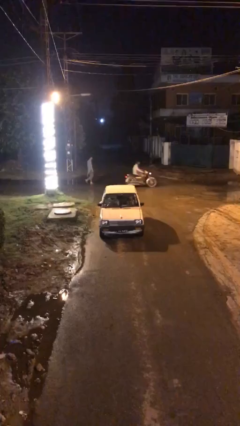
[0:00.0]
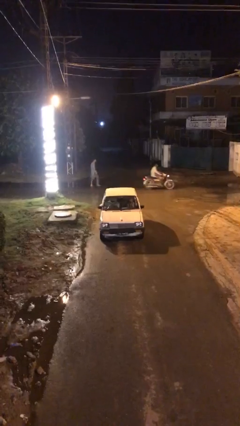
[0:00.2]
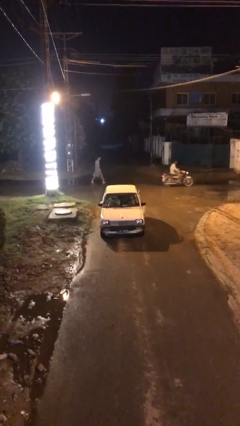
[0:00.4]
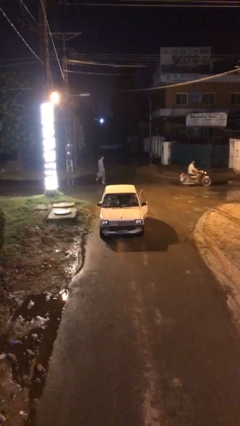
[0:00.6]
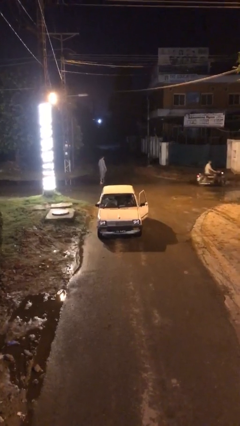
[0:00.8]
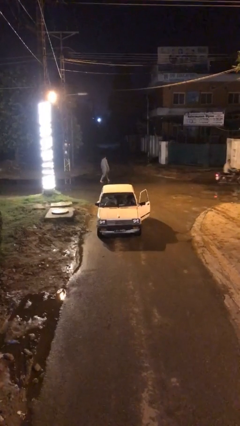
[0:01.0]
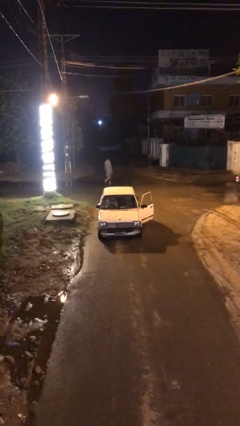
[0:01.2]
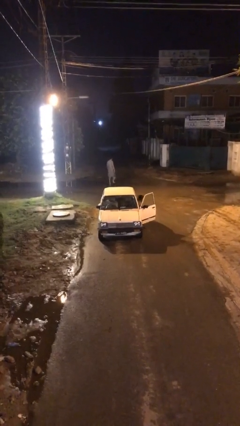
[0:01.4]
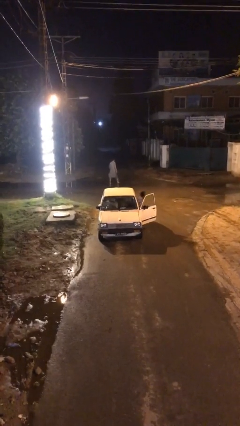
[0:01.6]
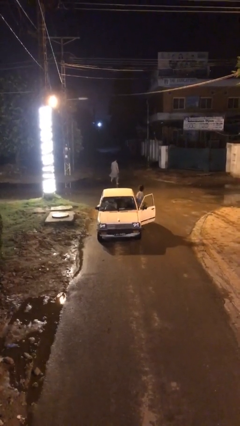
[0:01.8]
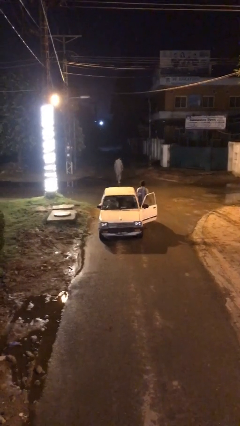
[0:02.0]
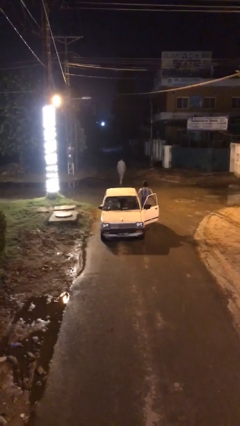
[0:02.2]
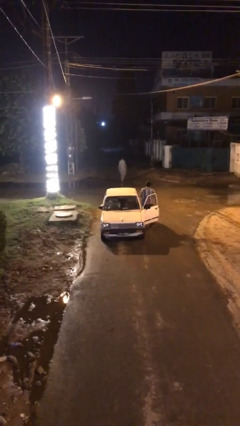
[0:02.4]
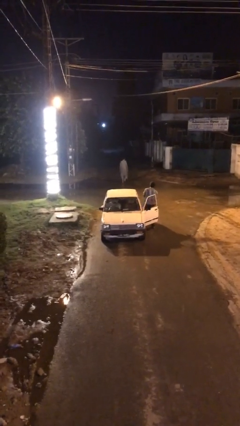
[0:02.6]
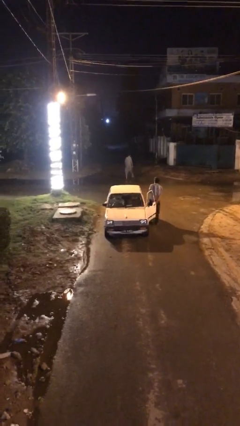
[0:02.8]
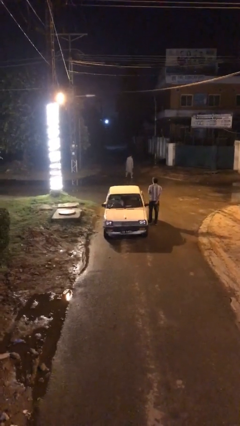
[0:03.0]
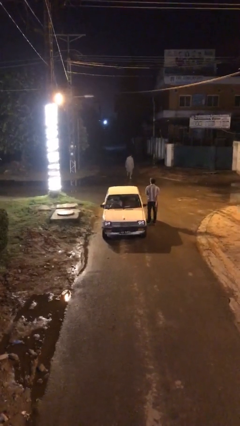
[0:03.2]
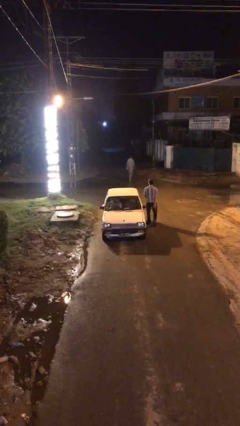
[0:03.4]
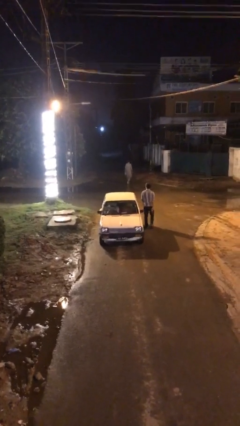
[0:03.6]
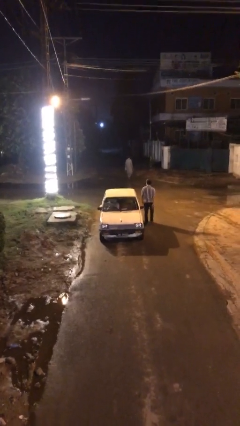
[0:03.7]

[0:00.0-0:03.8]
car drops off person

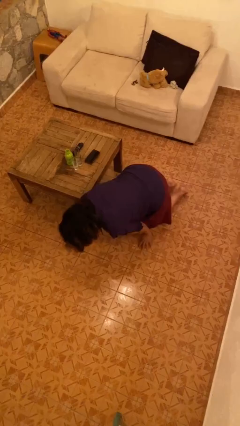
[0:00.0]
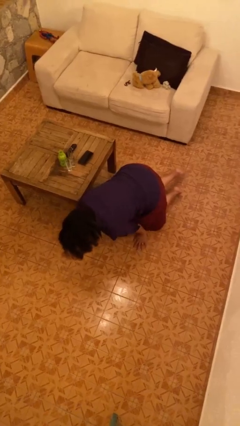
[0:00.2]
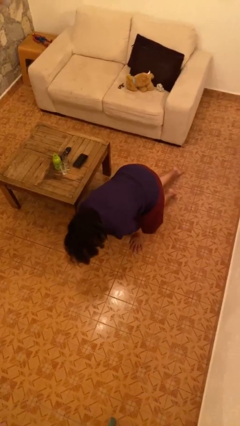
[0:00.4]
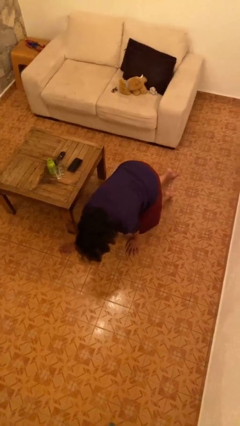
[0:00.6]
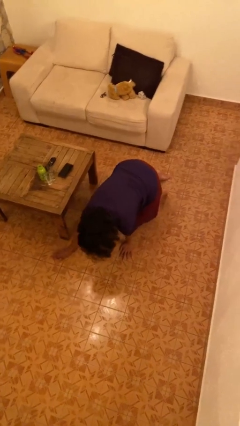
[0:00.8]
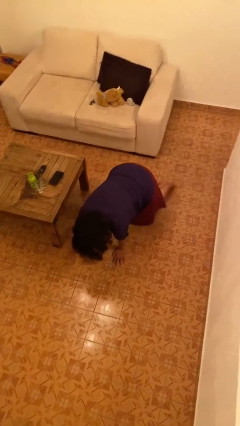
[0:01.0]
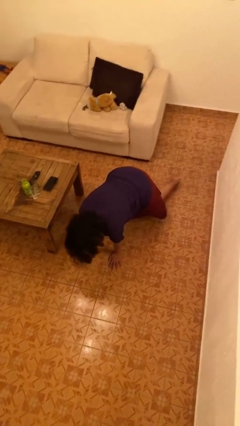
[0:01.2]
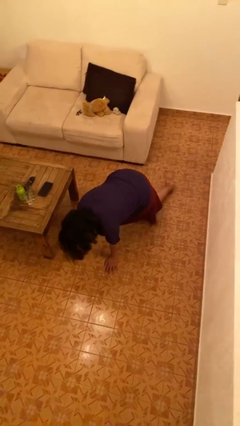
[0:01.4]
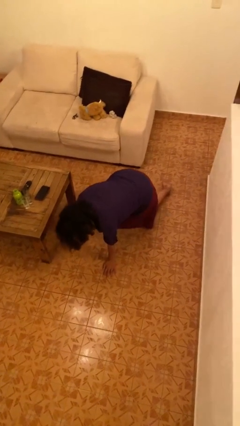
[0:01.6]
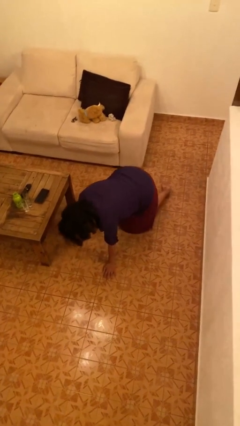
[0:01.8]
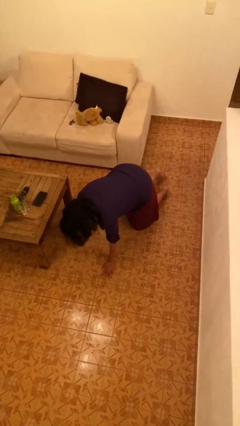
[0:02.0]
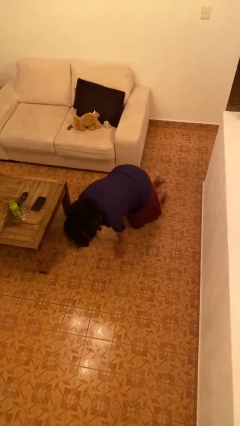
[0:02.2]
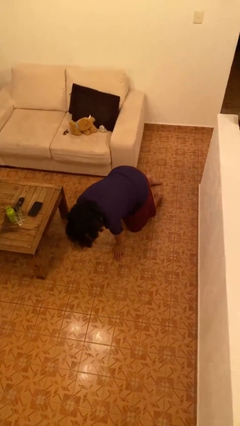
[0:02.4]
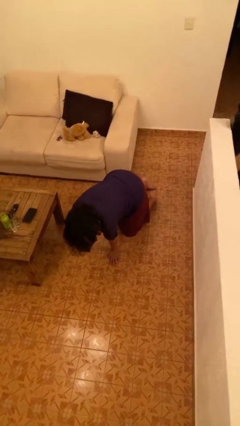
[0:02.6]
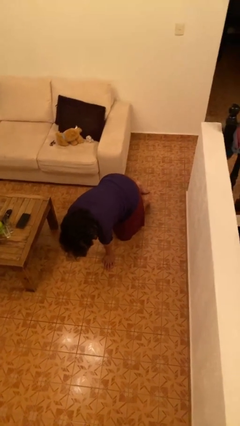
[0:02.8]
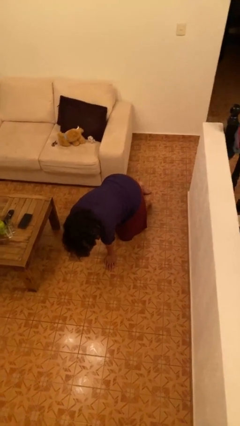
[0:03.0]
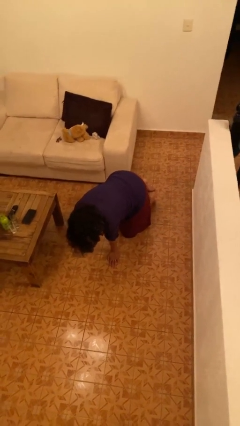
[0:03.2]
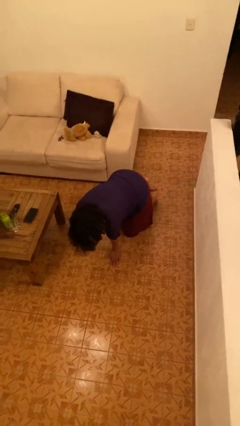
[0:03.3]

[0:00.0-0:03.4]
person crawls

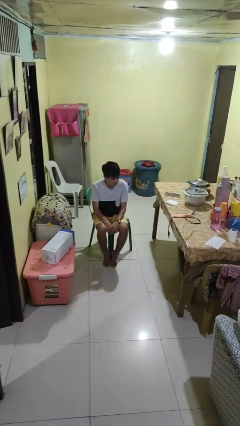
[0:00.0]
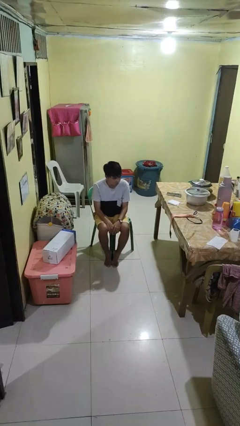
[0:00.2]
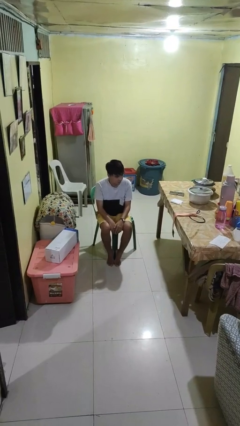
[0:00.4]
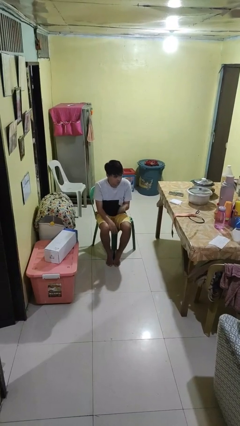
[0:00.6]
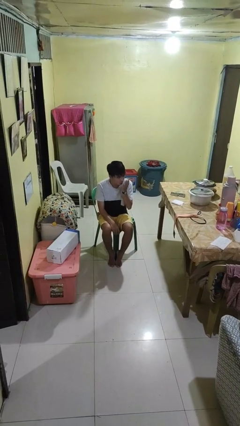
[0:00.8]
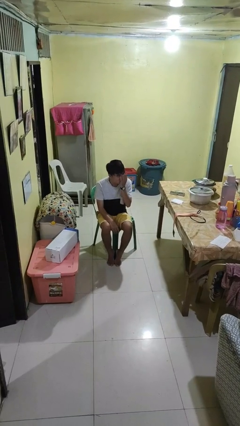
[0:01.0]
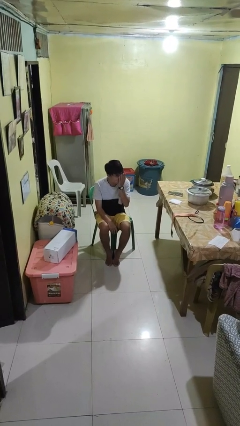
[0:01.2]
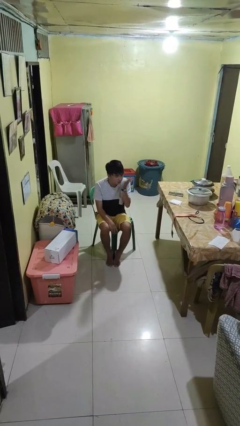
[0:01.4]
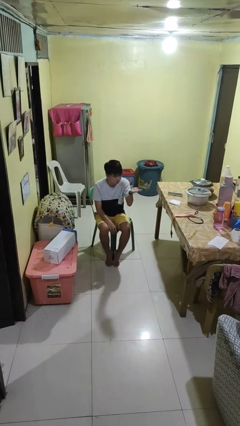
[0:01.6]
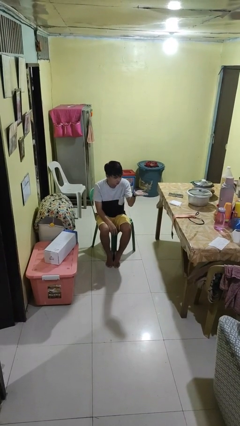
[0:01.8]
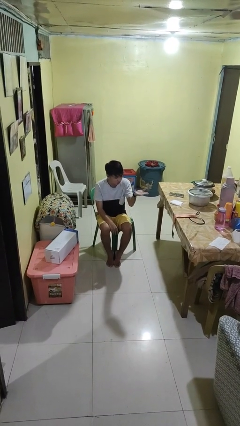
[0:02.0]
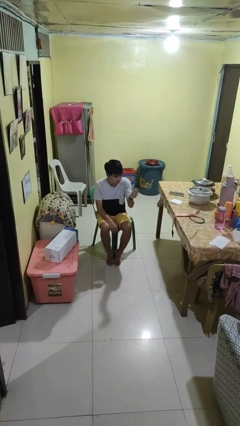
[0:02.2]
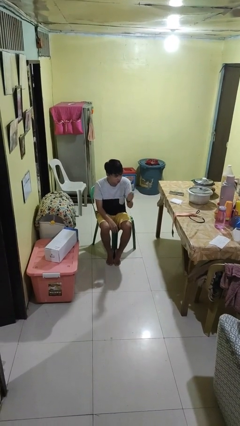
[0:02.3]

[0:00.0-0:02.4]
person gestures blow kiss

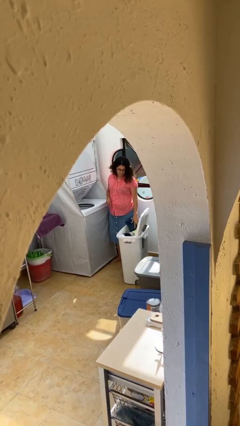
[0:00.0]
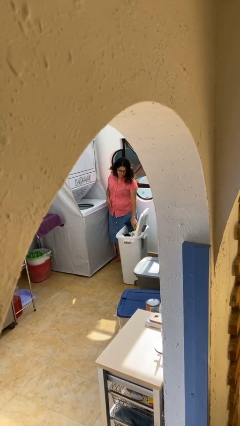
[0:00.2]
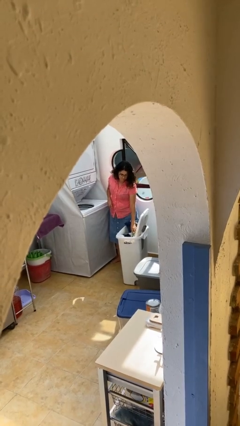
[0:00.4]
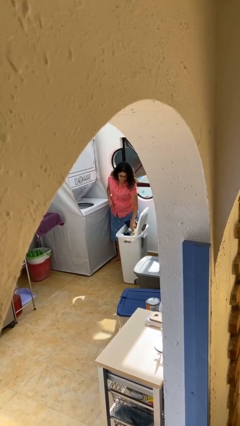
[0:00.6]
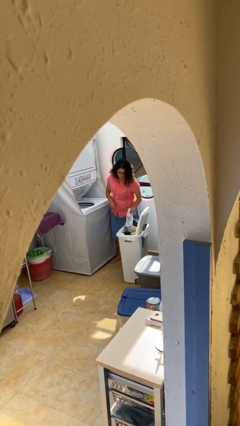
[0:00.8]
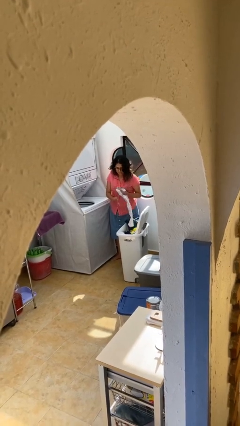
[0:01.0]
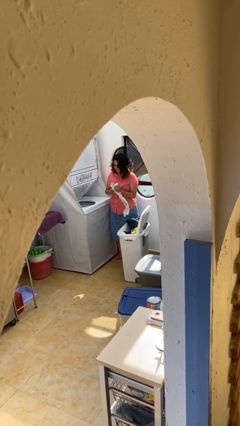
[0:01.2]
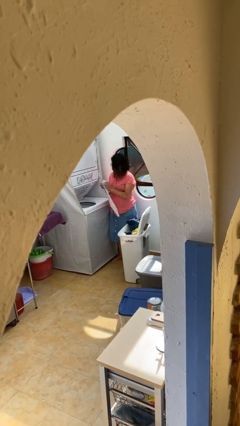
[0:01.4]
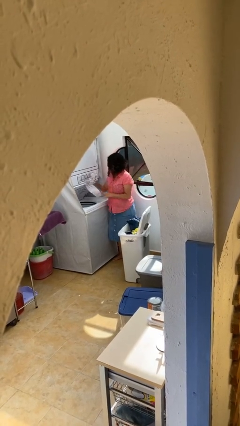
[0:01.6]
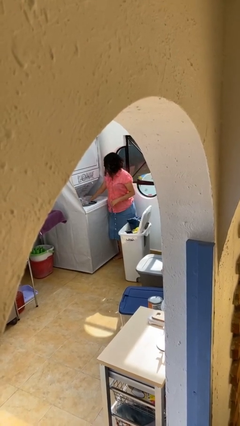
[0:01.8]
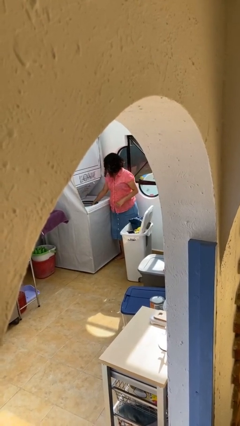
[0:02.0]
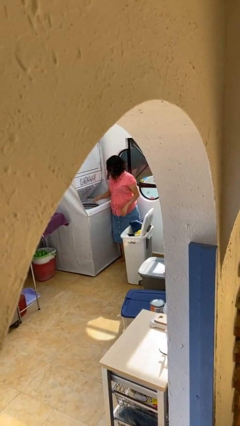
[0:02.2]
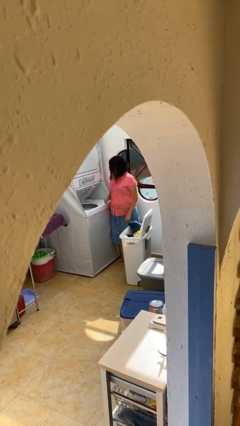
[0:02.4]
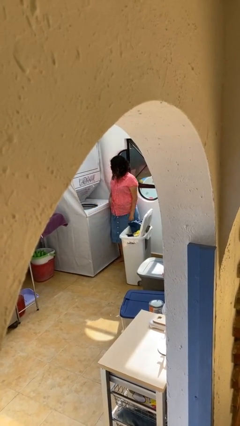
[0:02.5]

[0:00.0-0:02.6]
person loads clotheswasher

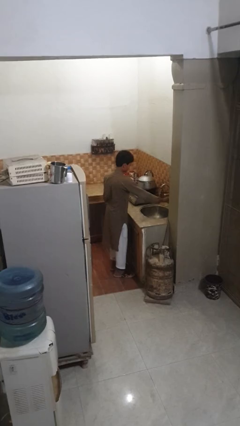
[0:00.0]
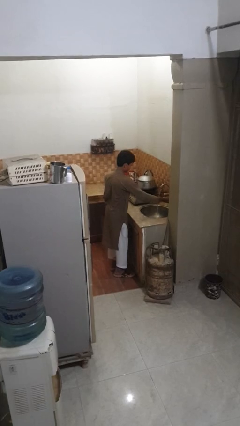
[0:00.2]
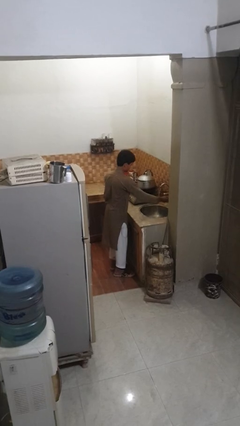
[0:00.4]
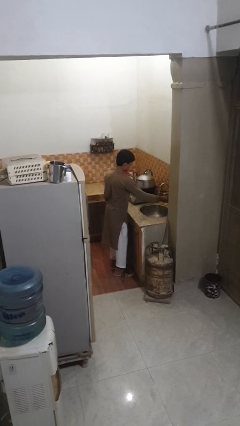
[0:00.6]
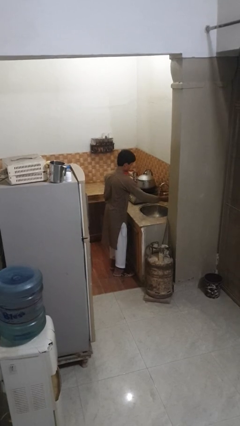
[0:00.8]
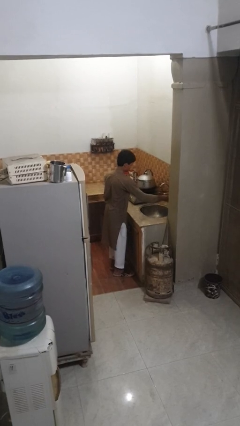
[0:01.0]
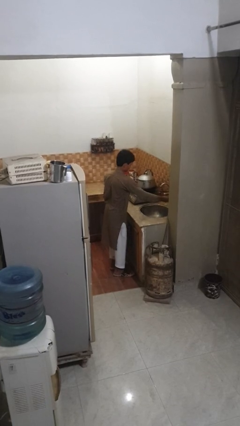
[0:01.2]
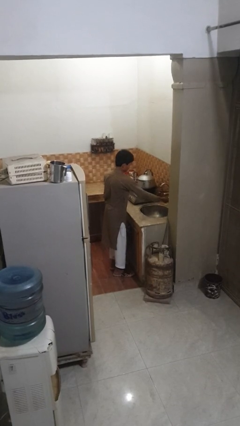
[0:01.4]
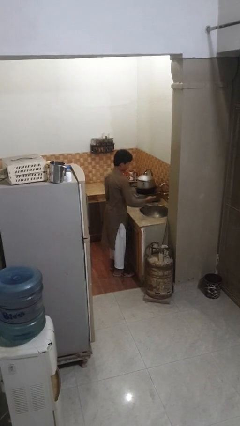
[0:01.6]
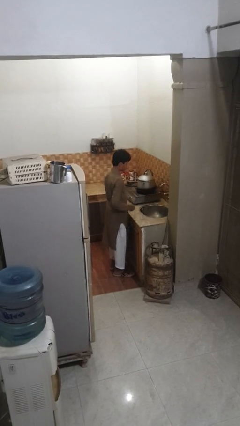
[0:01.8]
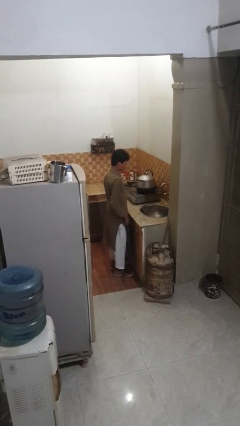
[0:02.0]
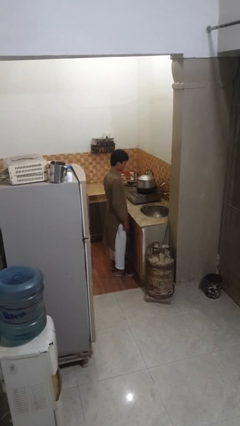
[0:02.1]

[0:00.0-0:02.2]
person turns off faucet

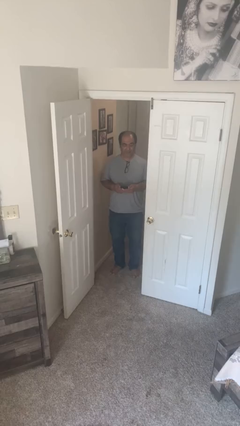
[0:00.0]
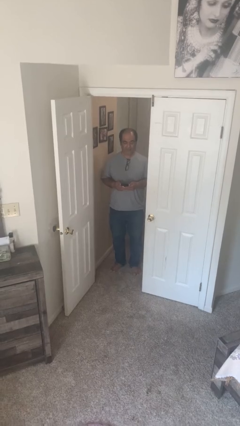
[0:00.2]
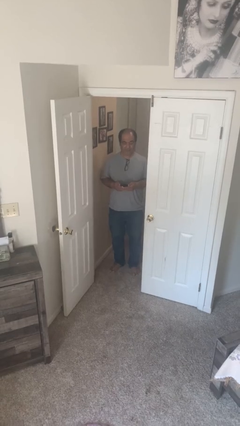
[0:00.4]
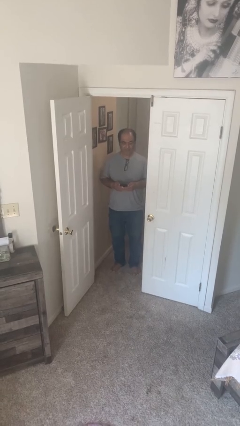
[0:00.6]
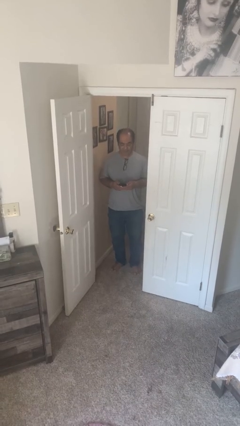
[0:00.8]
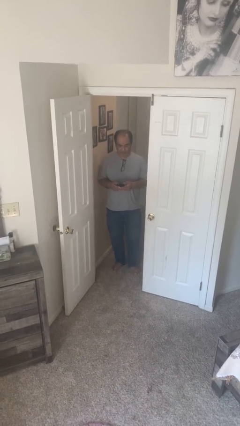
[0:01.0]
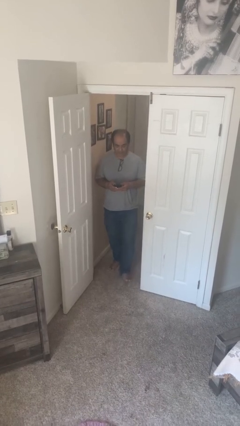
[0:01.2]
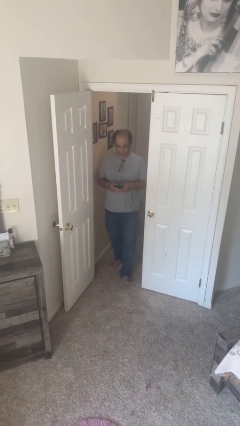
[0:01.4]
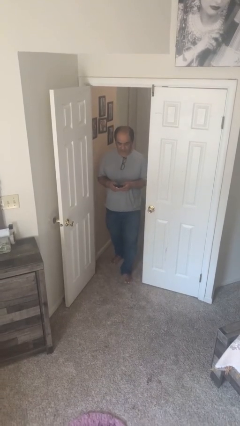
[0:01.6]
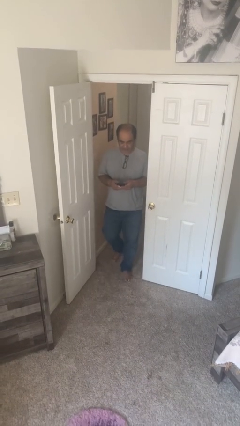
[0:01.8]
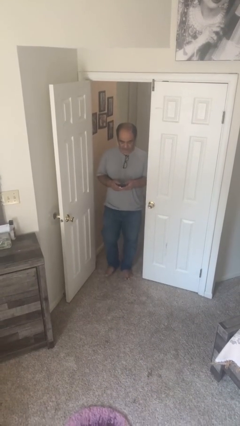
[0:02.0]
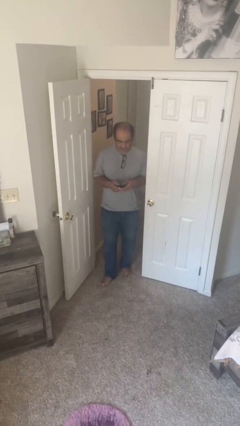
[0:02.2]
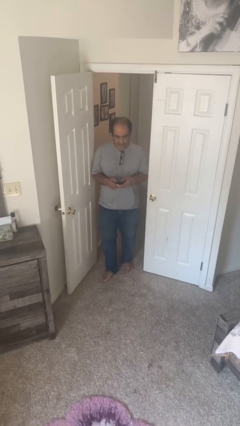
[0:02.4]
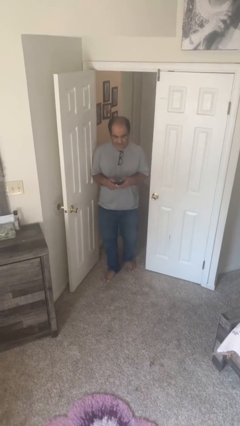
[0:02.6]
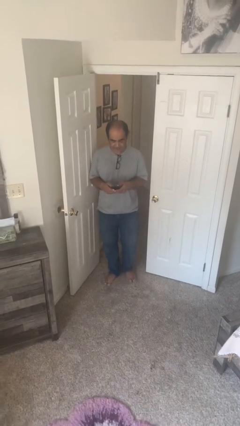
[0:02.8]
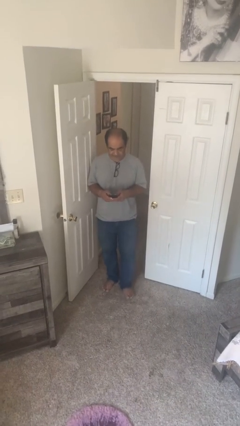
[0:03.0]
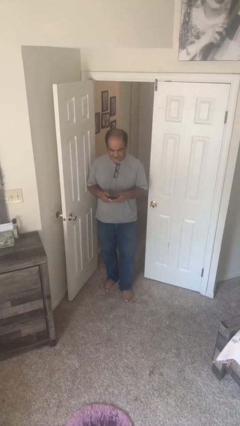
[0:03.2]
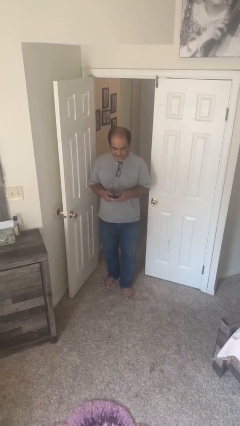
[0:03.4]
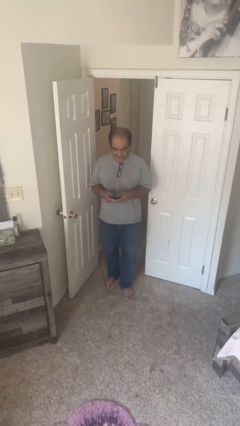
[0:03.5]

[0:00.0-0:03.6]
person enters scene through structure
